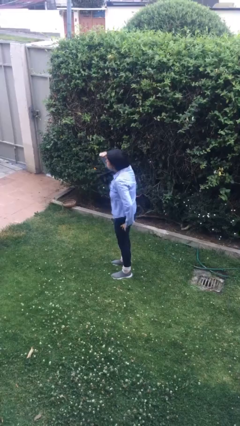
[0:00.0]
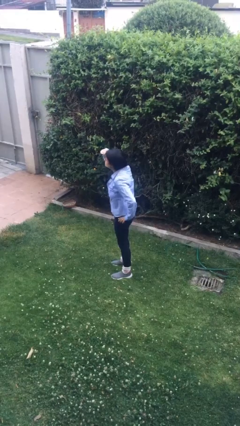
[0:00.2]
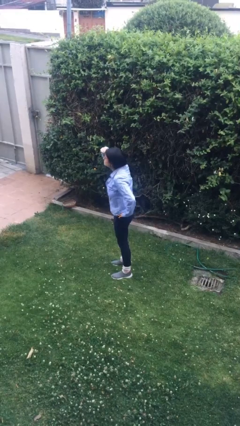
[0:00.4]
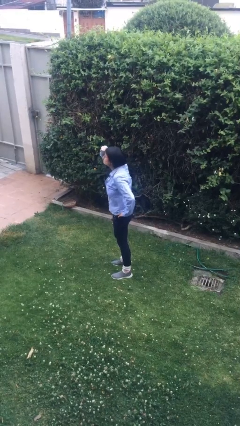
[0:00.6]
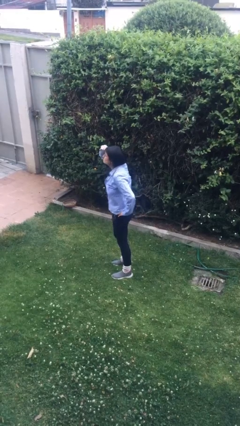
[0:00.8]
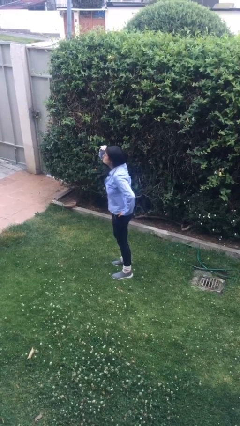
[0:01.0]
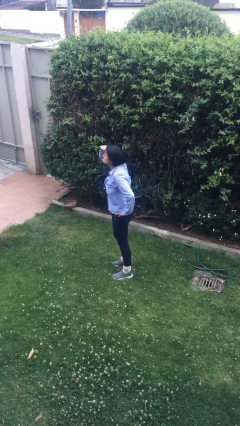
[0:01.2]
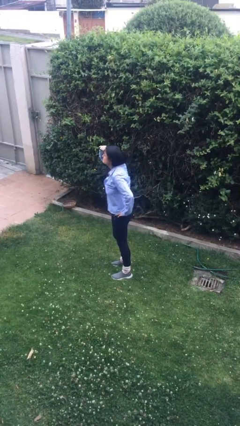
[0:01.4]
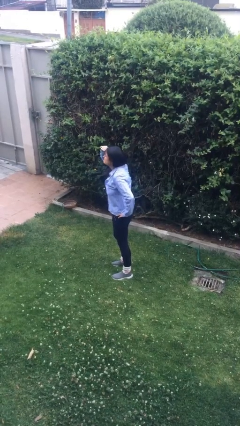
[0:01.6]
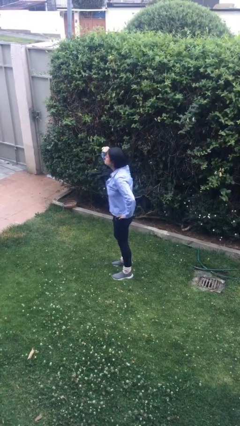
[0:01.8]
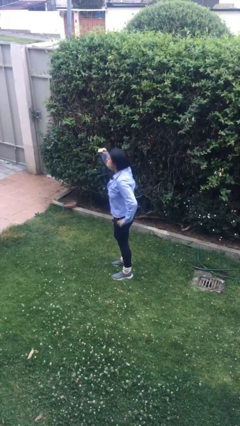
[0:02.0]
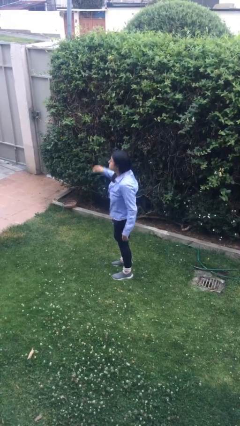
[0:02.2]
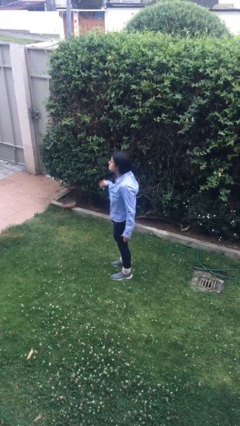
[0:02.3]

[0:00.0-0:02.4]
person shades eyes

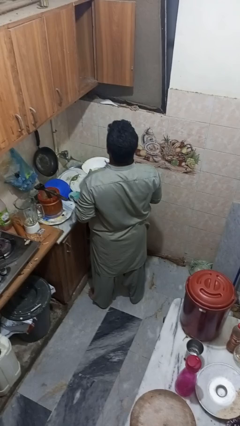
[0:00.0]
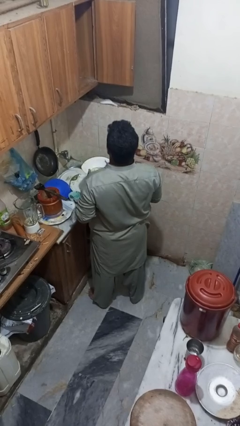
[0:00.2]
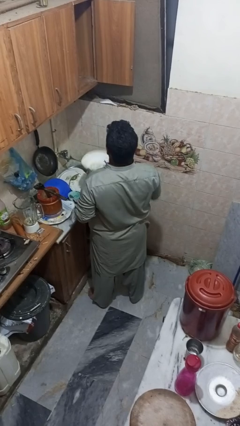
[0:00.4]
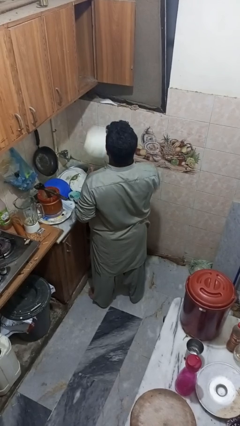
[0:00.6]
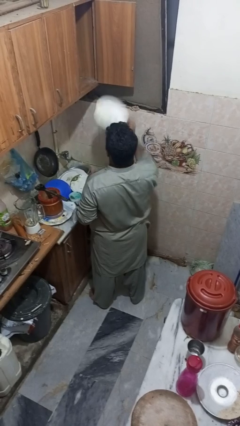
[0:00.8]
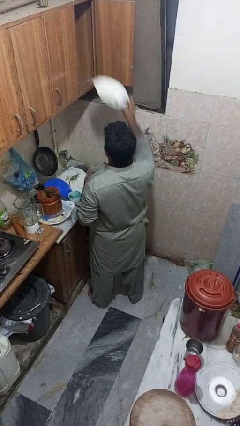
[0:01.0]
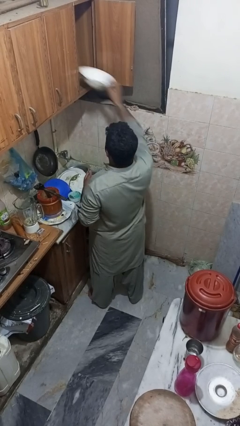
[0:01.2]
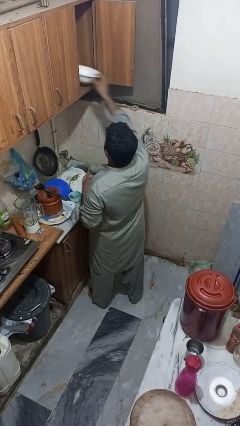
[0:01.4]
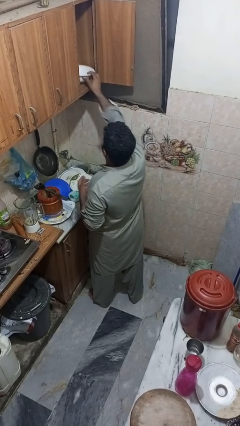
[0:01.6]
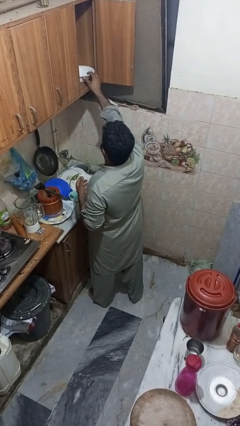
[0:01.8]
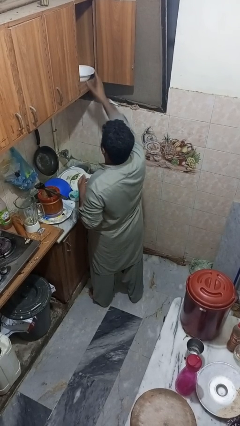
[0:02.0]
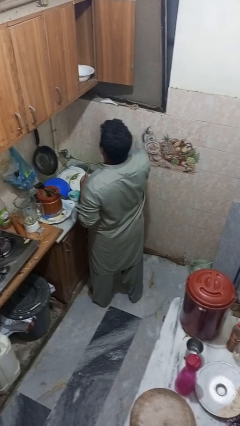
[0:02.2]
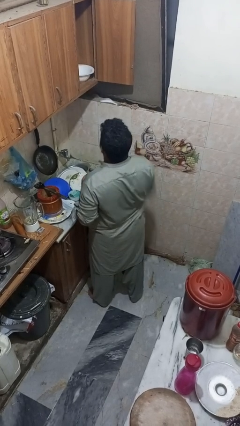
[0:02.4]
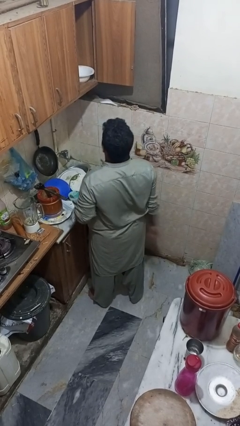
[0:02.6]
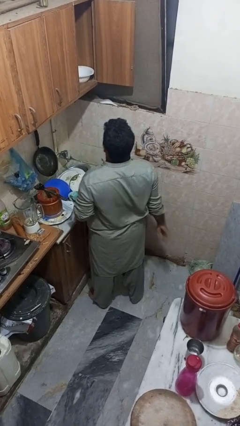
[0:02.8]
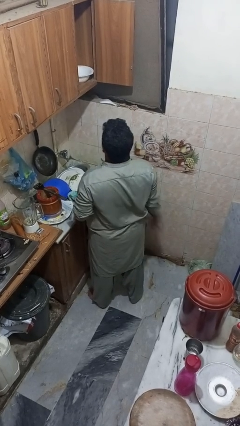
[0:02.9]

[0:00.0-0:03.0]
person puts object in cabinet

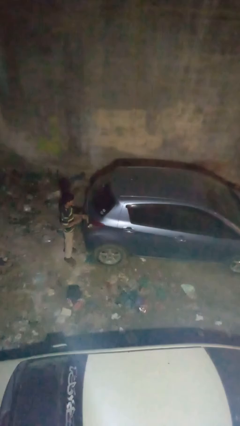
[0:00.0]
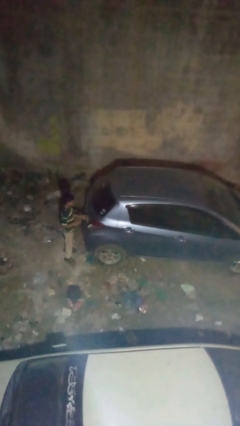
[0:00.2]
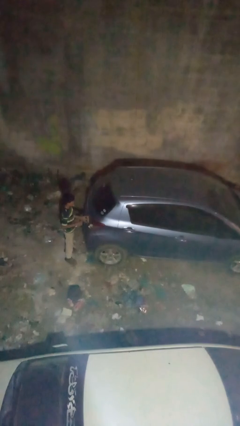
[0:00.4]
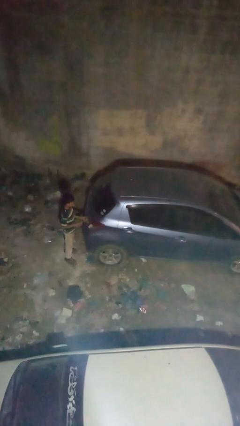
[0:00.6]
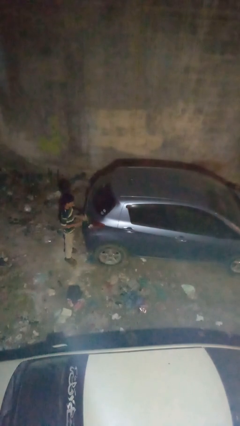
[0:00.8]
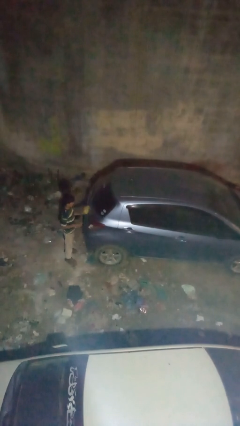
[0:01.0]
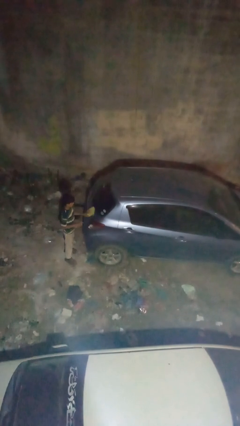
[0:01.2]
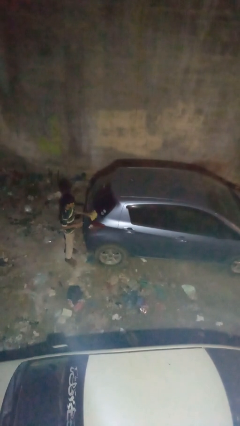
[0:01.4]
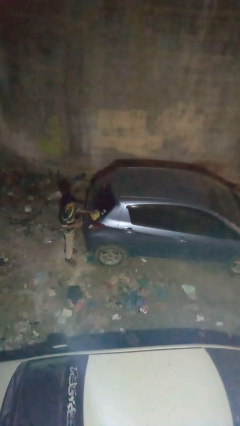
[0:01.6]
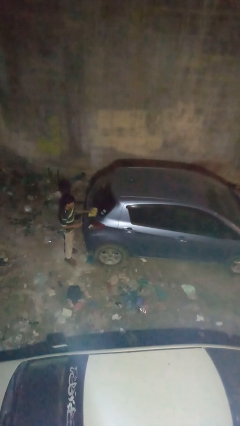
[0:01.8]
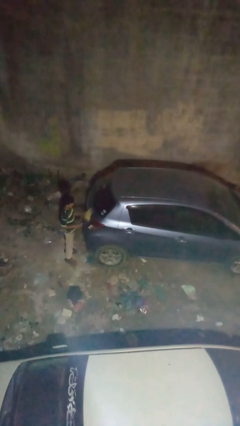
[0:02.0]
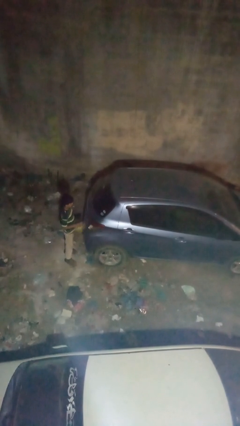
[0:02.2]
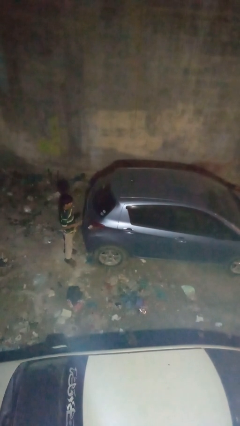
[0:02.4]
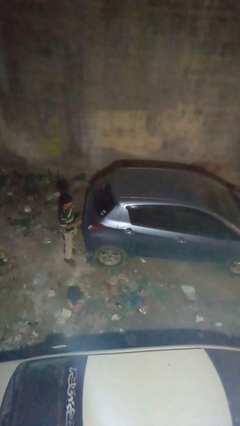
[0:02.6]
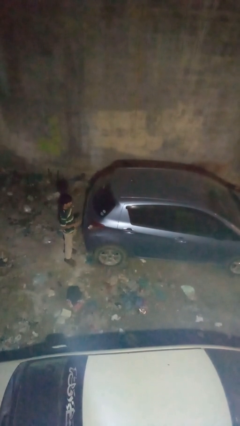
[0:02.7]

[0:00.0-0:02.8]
person polishes car with rag

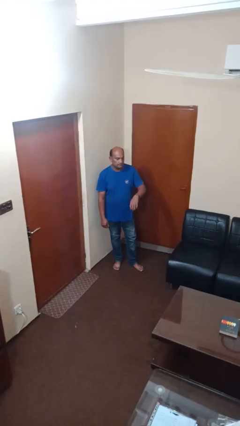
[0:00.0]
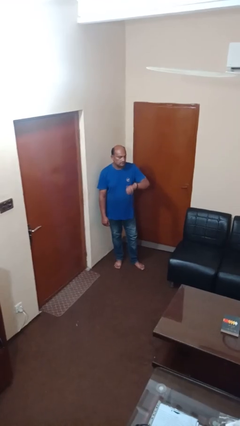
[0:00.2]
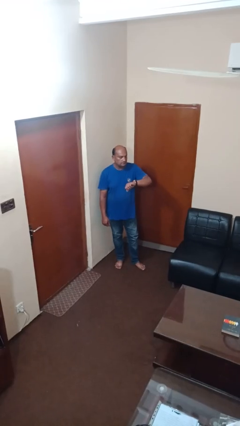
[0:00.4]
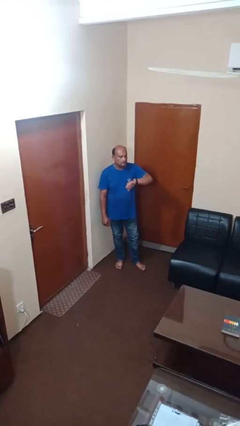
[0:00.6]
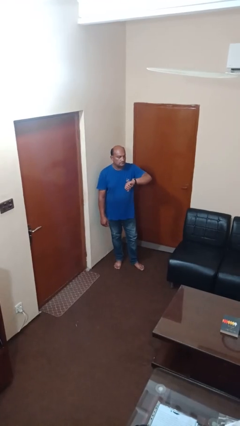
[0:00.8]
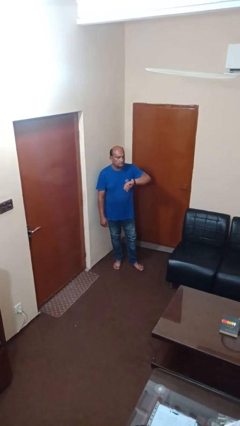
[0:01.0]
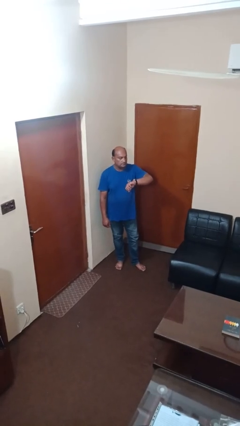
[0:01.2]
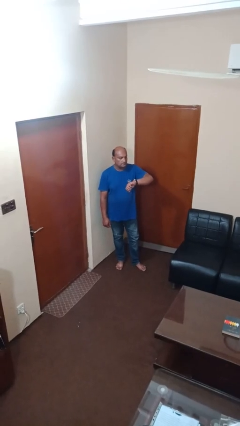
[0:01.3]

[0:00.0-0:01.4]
person looks at wristwatch

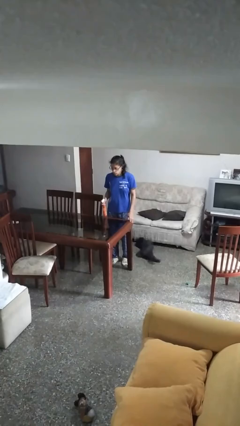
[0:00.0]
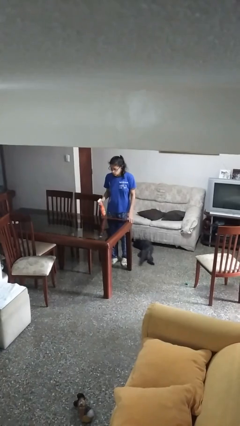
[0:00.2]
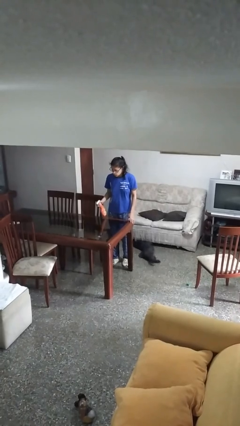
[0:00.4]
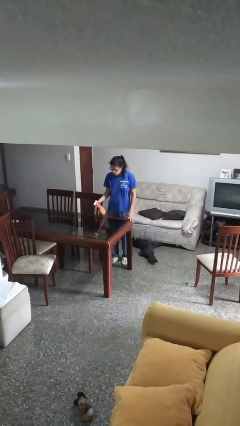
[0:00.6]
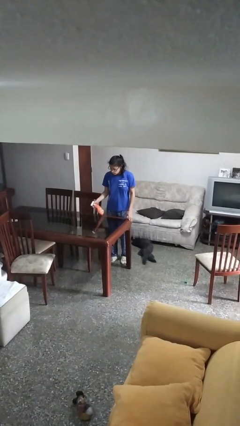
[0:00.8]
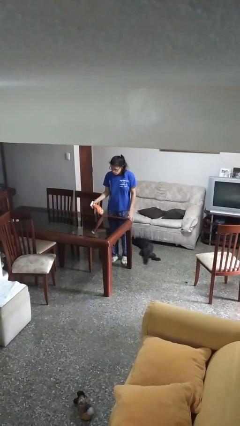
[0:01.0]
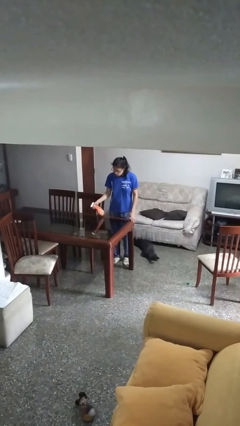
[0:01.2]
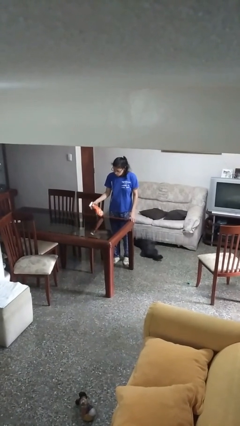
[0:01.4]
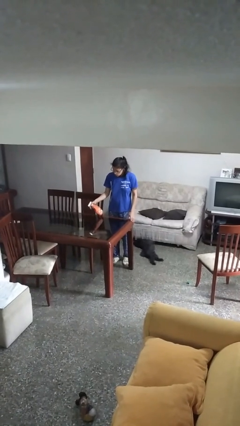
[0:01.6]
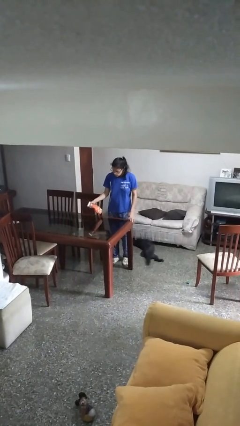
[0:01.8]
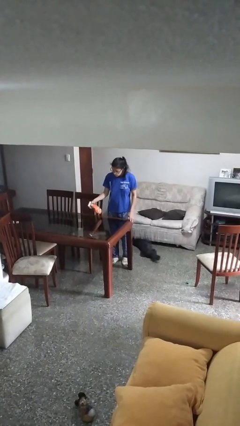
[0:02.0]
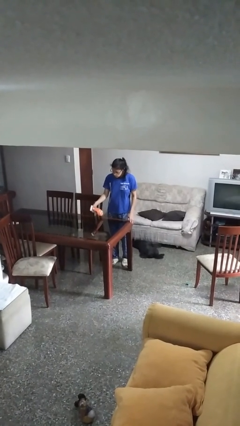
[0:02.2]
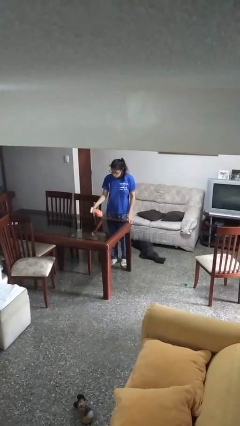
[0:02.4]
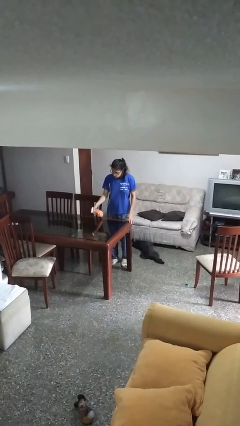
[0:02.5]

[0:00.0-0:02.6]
person sprays from bottle

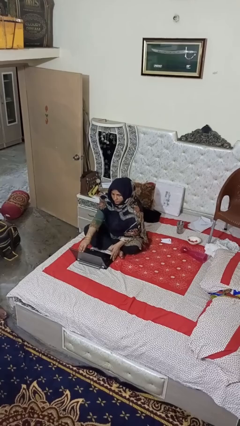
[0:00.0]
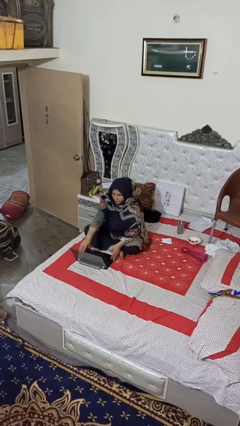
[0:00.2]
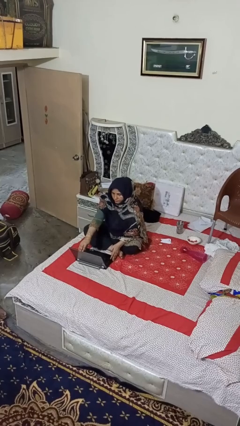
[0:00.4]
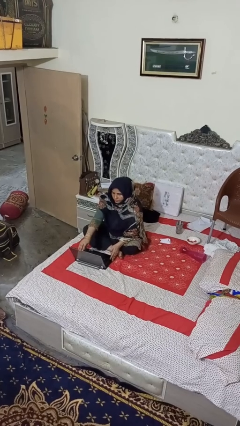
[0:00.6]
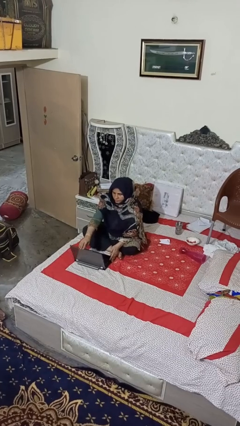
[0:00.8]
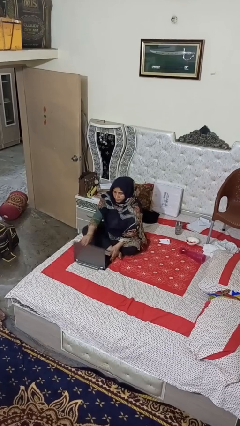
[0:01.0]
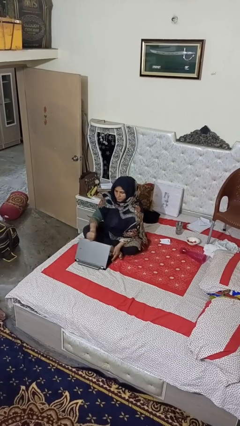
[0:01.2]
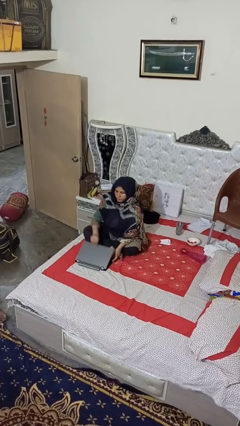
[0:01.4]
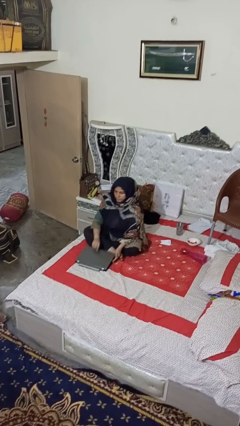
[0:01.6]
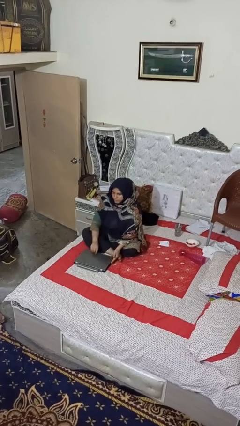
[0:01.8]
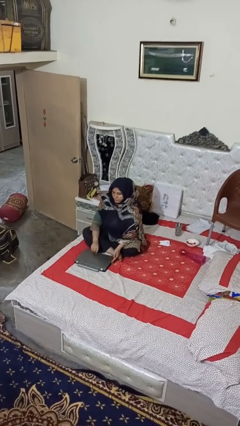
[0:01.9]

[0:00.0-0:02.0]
person closes laptop

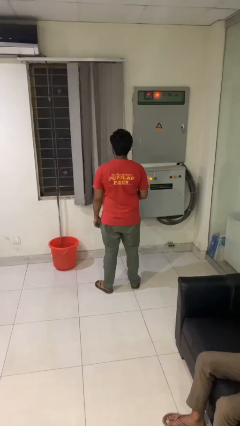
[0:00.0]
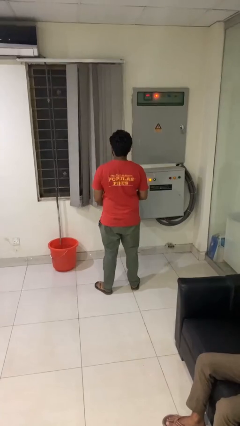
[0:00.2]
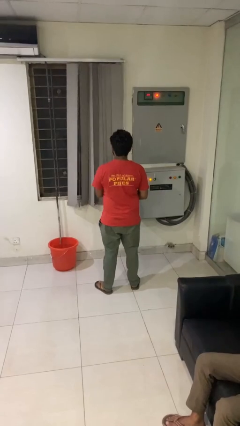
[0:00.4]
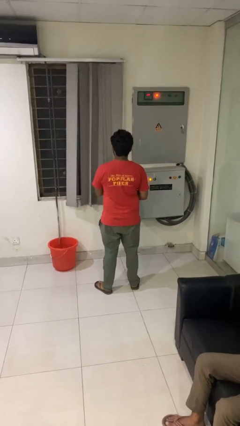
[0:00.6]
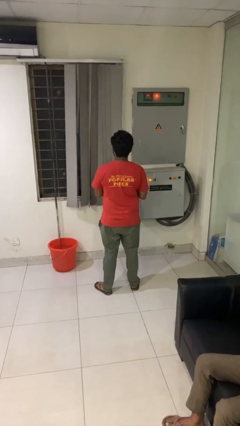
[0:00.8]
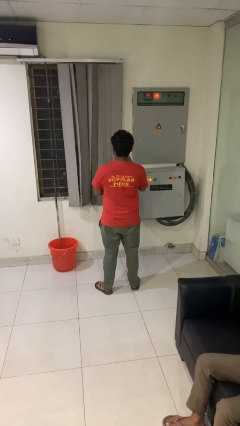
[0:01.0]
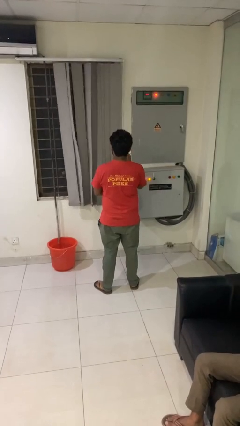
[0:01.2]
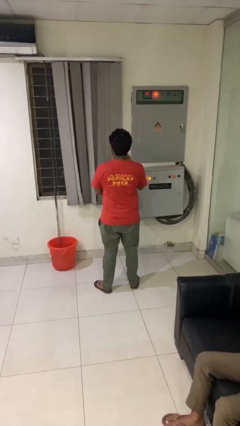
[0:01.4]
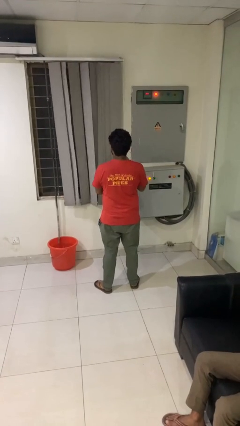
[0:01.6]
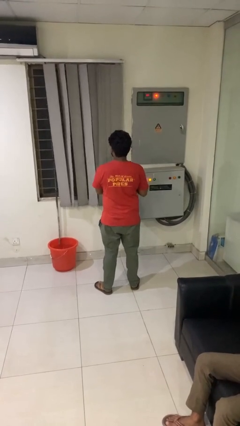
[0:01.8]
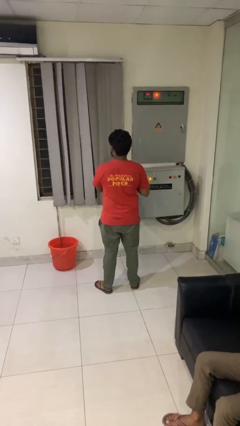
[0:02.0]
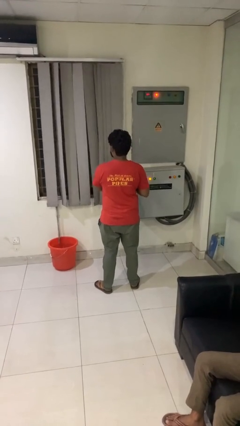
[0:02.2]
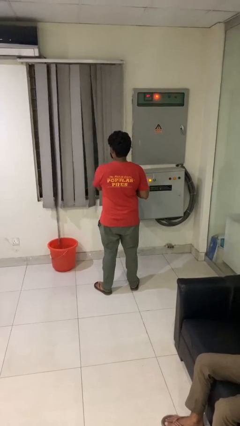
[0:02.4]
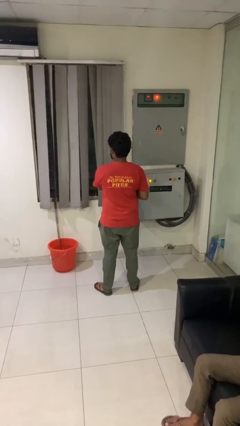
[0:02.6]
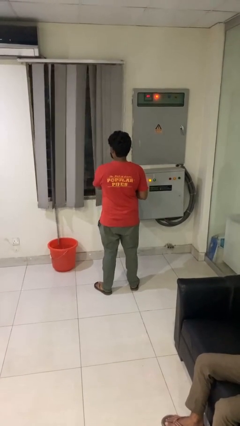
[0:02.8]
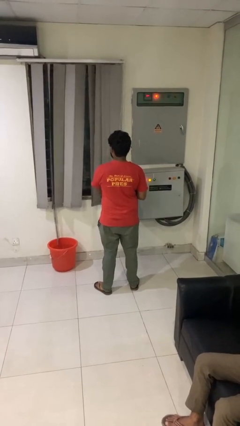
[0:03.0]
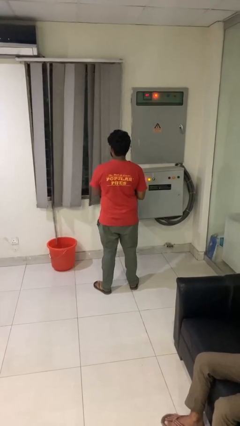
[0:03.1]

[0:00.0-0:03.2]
person closes curtains
